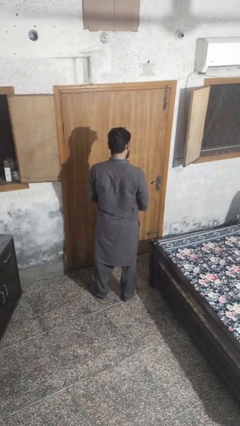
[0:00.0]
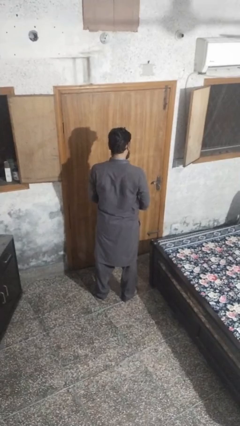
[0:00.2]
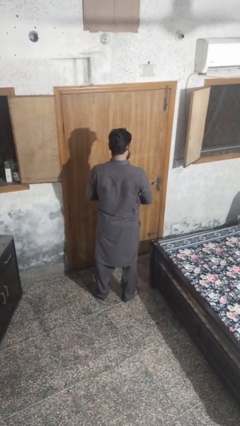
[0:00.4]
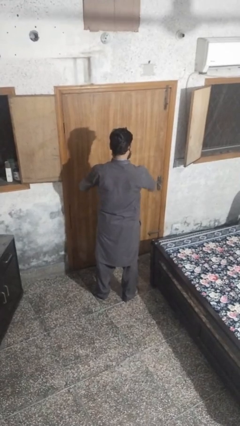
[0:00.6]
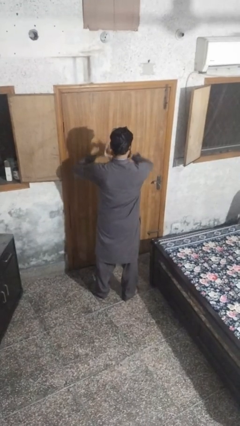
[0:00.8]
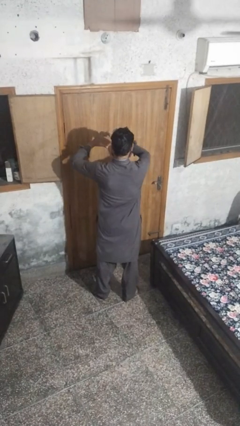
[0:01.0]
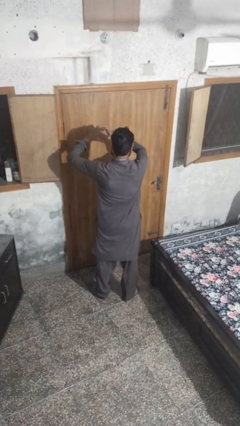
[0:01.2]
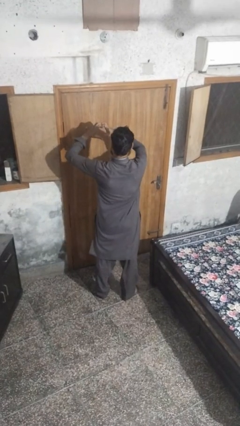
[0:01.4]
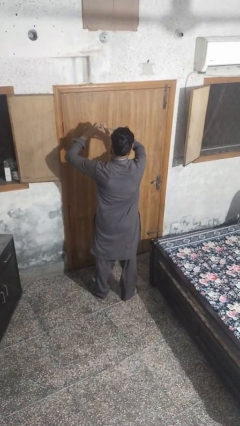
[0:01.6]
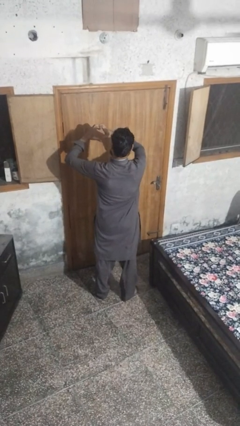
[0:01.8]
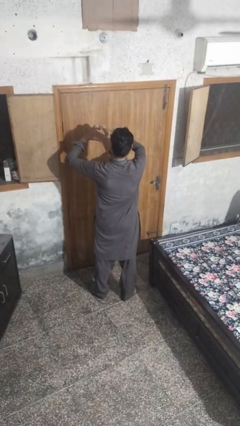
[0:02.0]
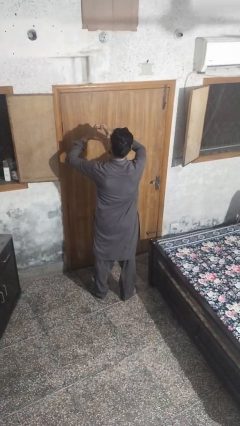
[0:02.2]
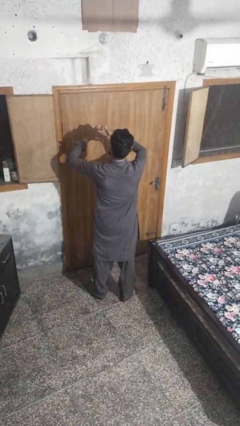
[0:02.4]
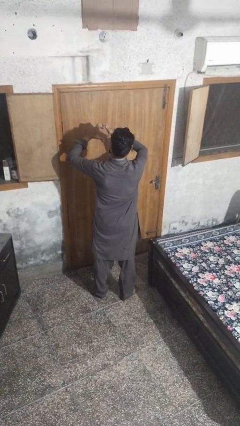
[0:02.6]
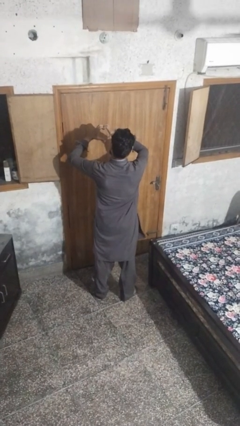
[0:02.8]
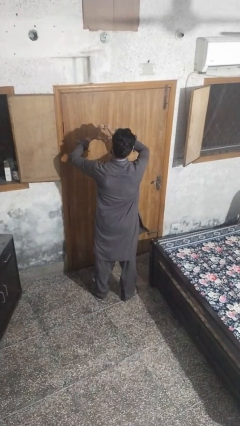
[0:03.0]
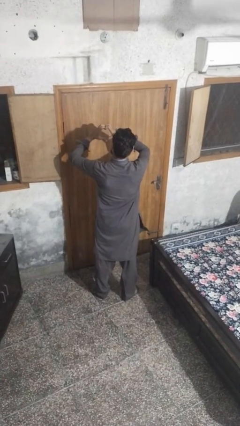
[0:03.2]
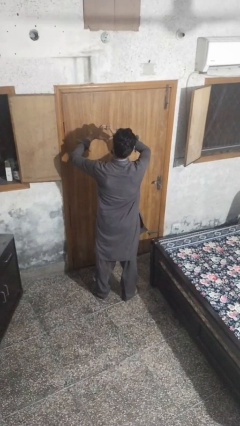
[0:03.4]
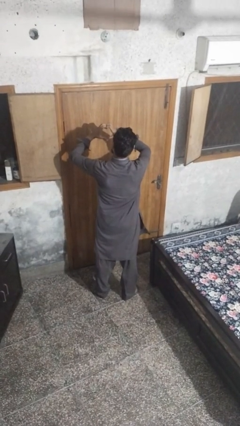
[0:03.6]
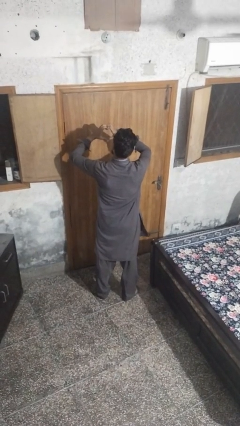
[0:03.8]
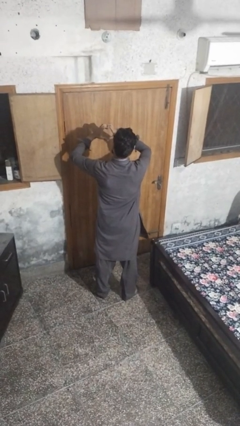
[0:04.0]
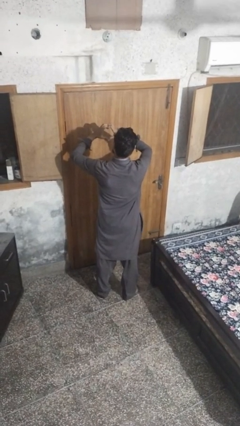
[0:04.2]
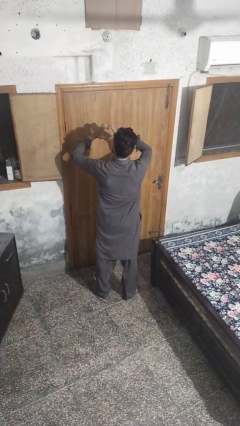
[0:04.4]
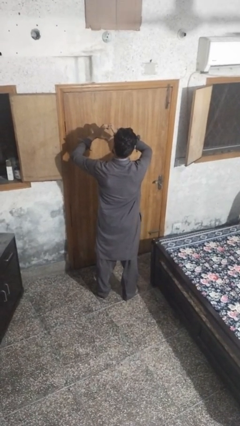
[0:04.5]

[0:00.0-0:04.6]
person gestures heart

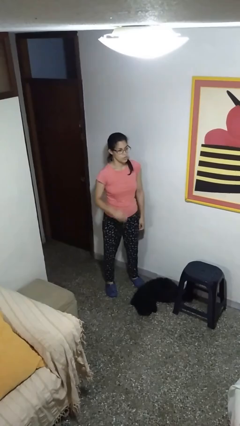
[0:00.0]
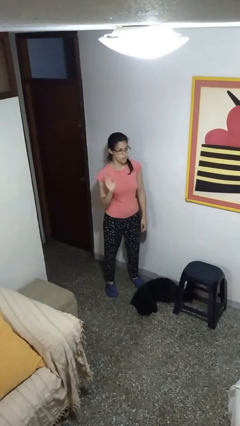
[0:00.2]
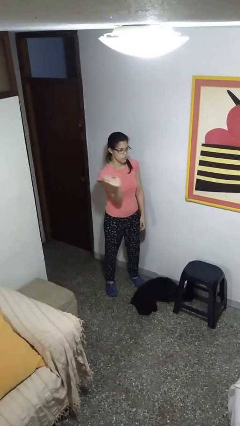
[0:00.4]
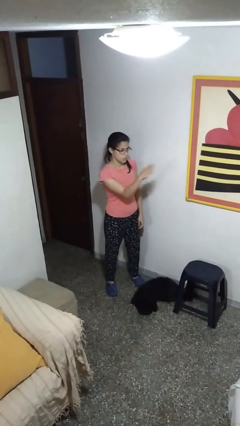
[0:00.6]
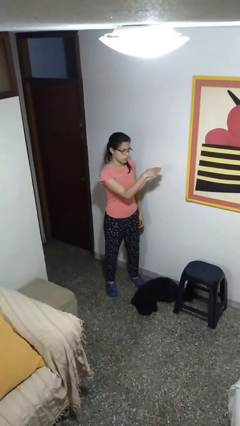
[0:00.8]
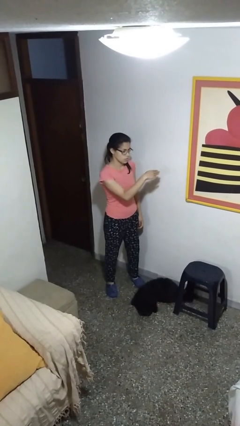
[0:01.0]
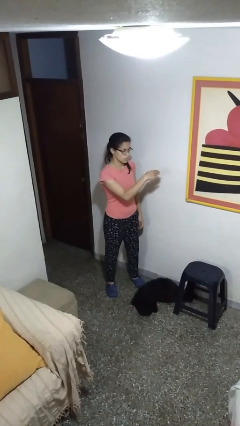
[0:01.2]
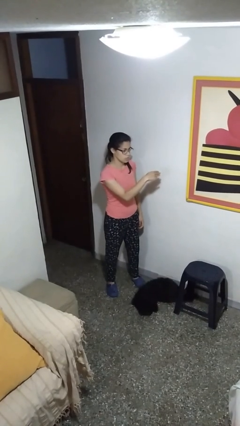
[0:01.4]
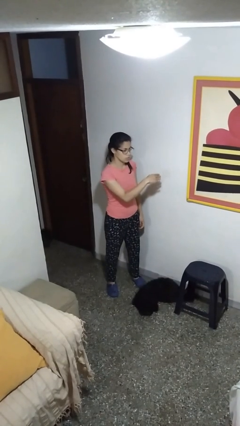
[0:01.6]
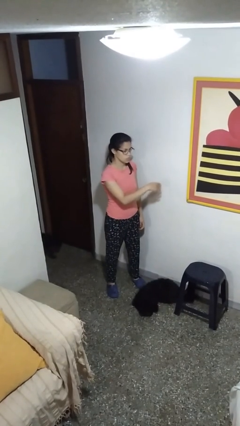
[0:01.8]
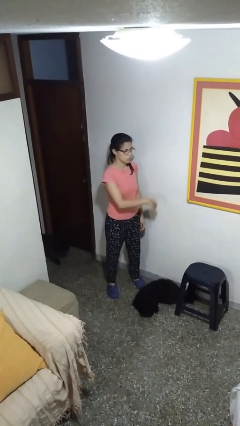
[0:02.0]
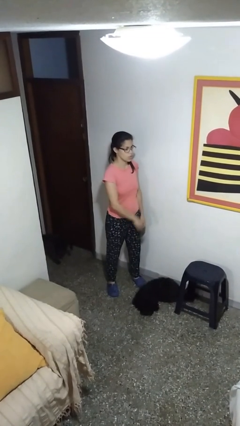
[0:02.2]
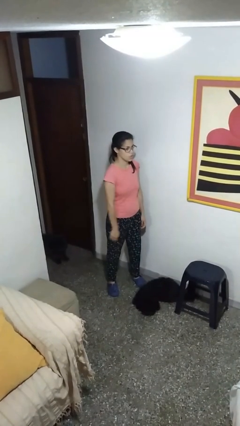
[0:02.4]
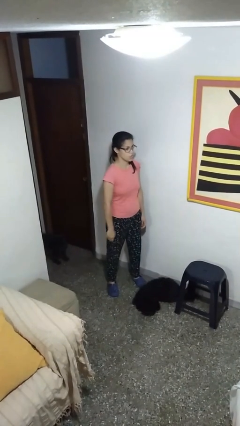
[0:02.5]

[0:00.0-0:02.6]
person gestures swipe left

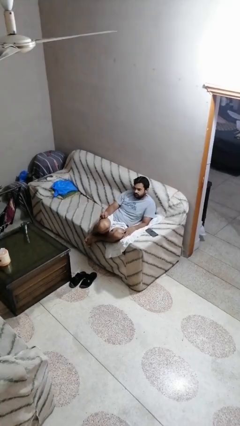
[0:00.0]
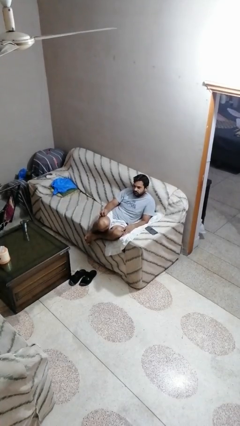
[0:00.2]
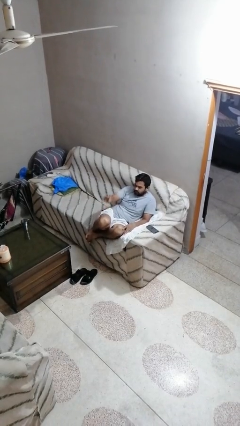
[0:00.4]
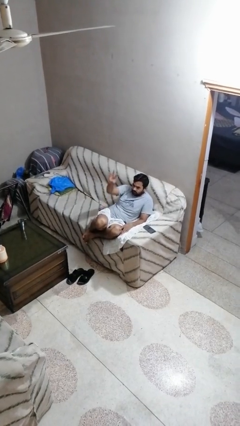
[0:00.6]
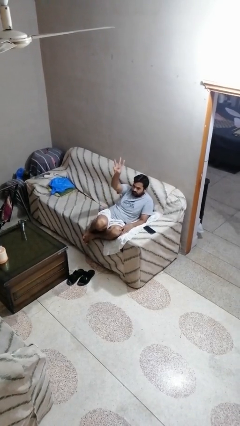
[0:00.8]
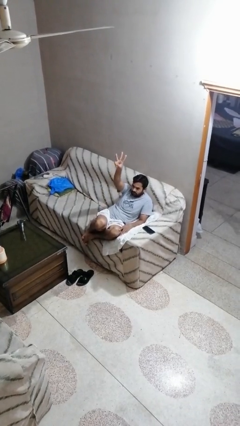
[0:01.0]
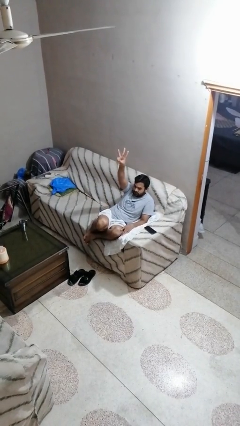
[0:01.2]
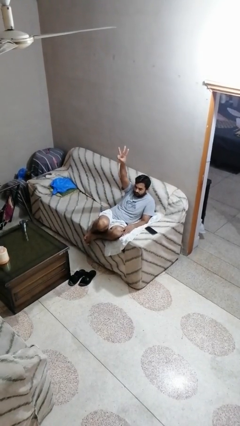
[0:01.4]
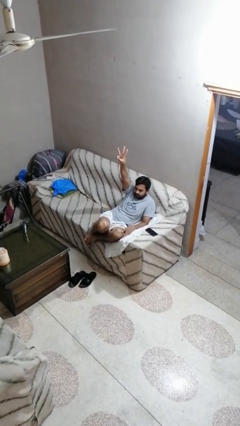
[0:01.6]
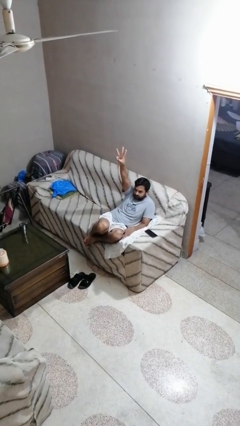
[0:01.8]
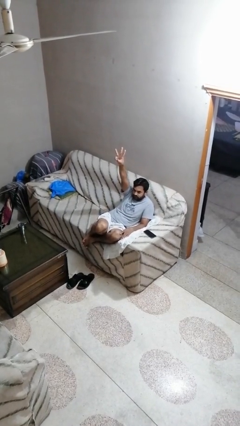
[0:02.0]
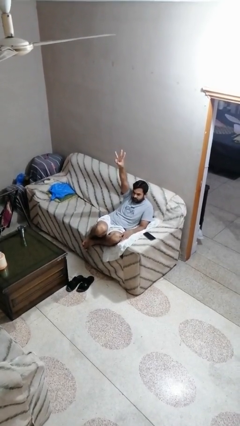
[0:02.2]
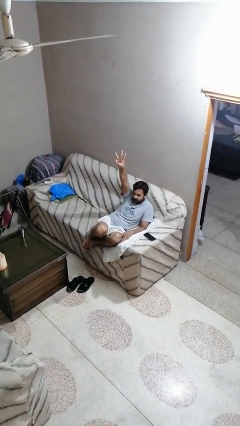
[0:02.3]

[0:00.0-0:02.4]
person gestures number three

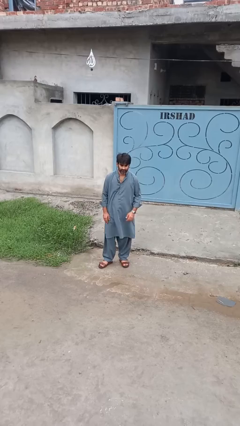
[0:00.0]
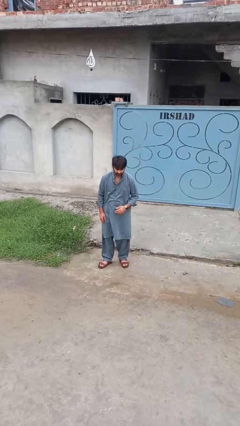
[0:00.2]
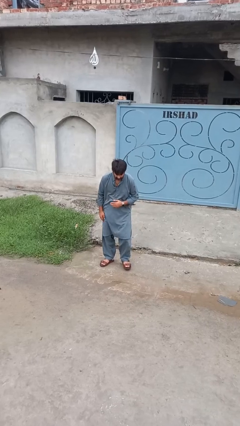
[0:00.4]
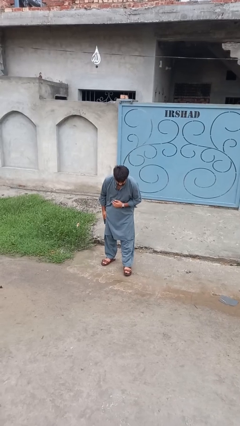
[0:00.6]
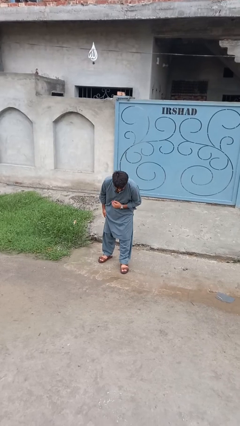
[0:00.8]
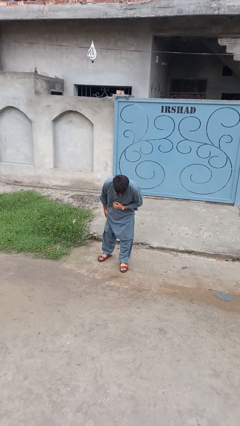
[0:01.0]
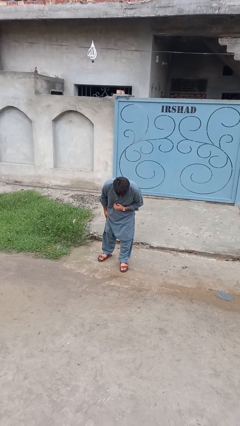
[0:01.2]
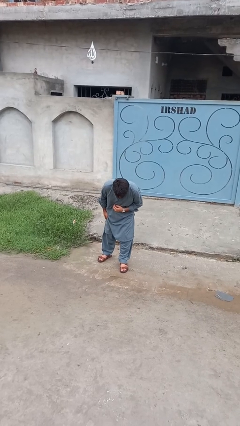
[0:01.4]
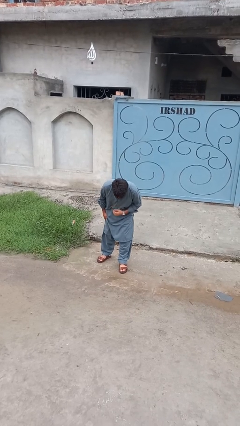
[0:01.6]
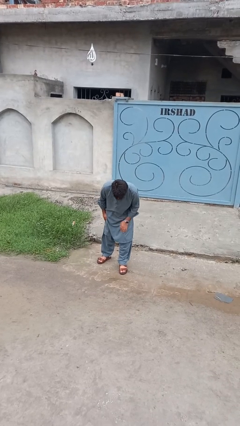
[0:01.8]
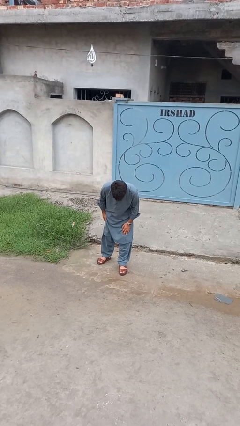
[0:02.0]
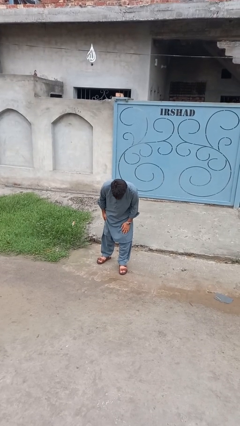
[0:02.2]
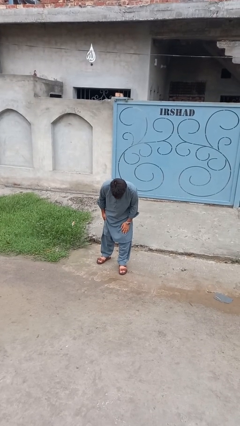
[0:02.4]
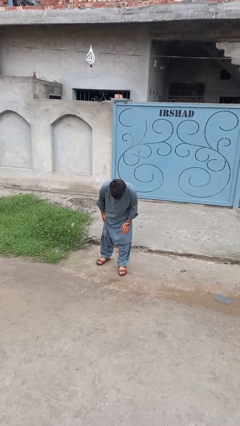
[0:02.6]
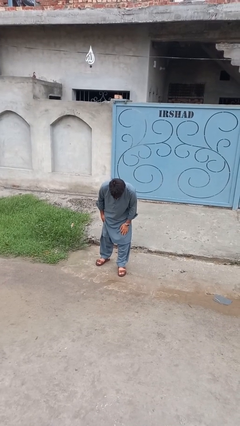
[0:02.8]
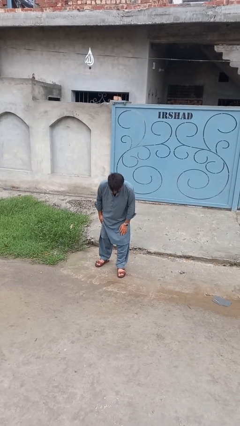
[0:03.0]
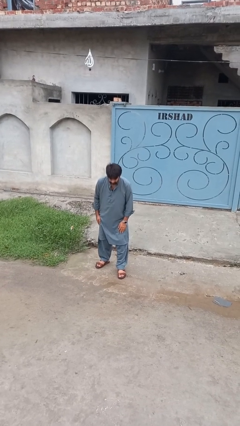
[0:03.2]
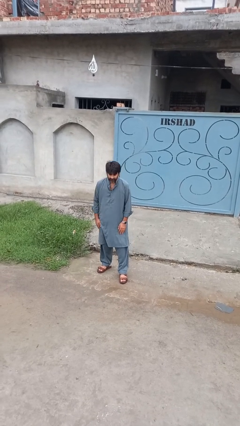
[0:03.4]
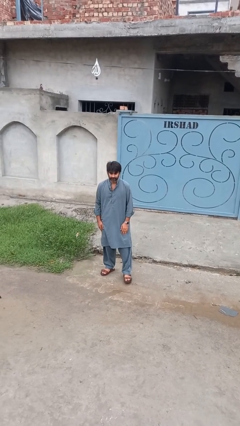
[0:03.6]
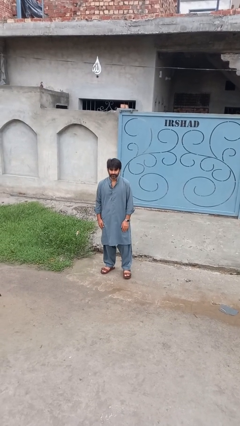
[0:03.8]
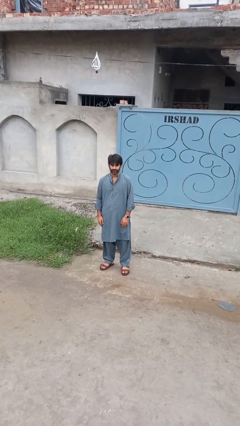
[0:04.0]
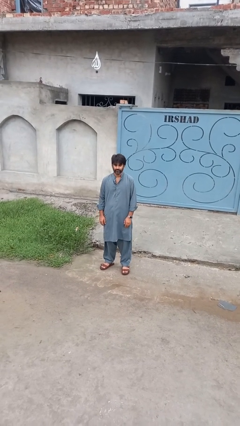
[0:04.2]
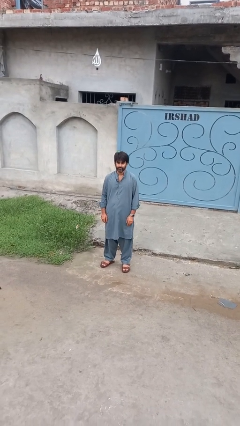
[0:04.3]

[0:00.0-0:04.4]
person bows

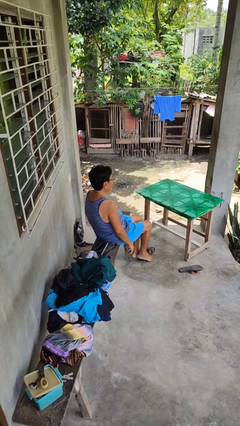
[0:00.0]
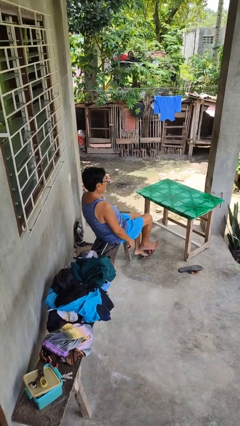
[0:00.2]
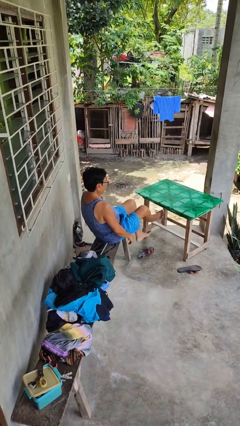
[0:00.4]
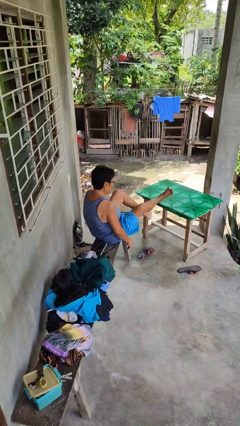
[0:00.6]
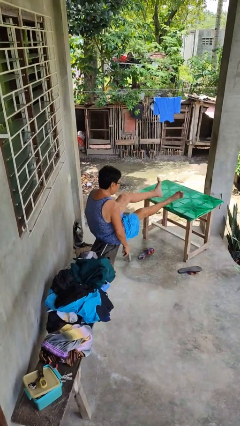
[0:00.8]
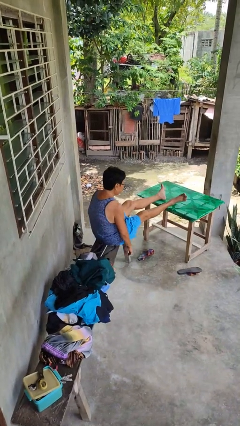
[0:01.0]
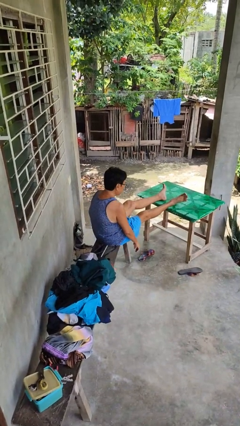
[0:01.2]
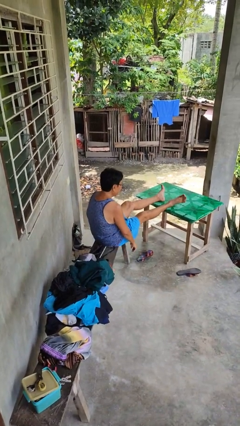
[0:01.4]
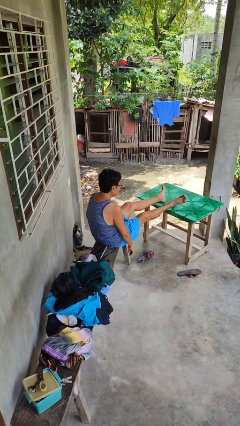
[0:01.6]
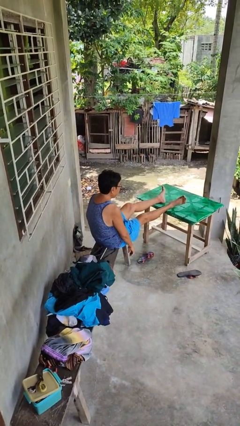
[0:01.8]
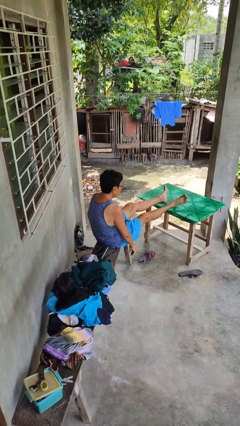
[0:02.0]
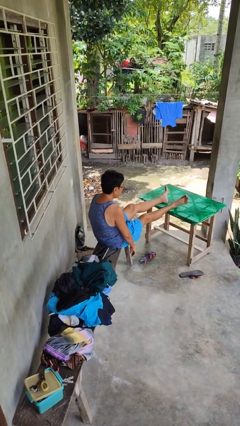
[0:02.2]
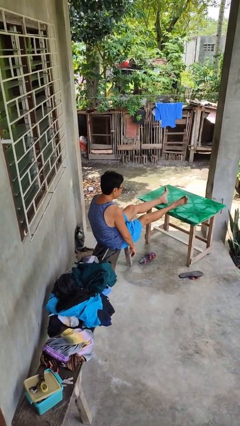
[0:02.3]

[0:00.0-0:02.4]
person puts feet up

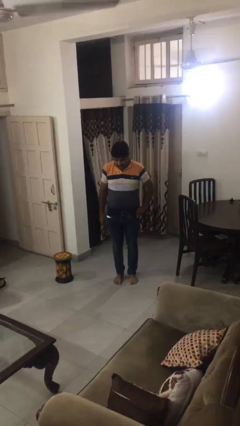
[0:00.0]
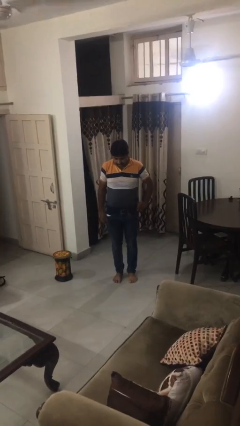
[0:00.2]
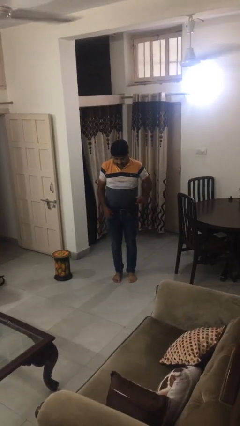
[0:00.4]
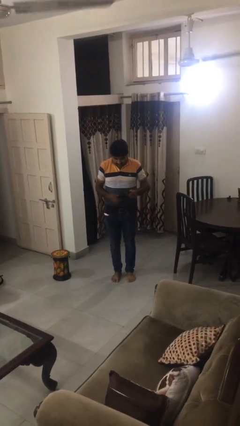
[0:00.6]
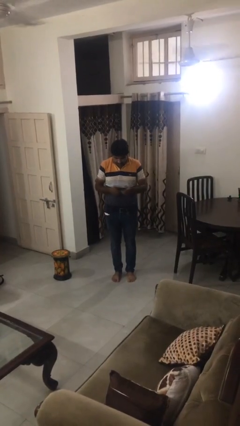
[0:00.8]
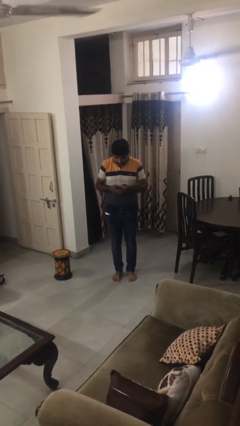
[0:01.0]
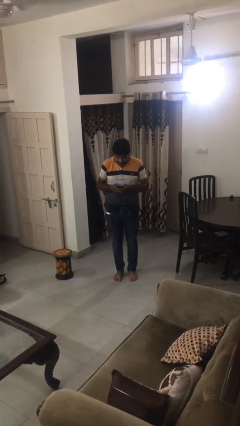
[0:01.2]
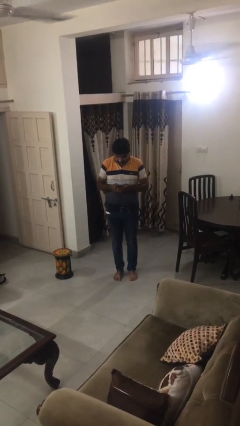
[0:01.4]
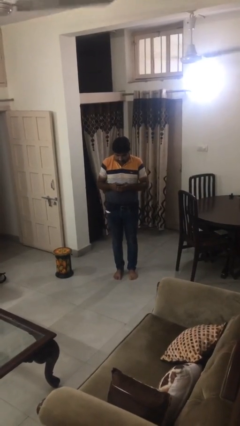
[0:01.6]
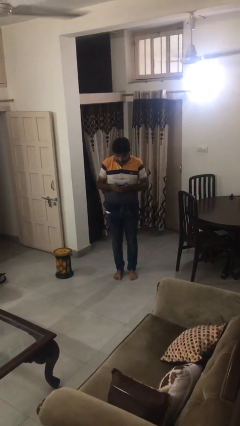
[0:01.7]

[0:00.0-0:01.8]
person takes phone from pocket
